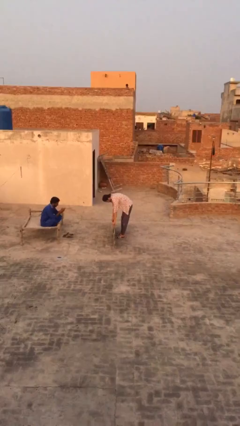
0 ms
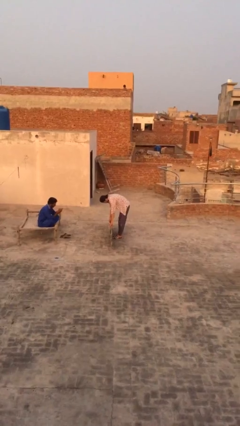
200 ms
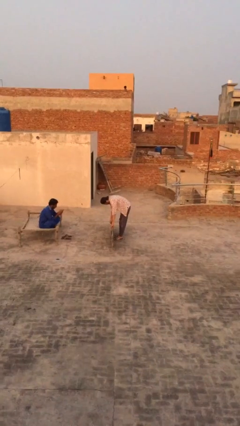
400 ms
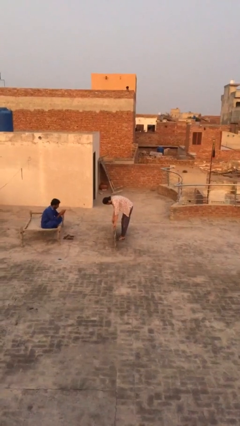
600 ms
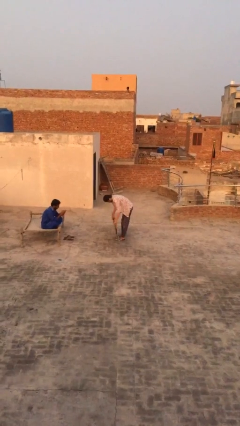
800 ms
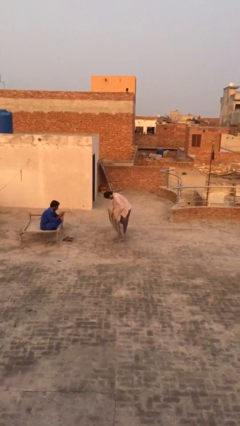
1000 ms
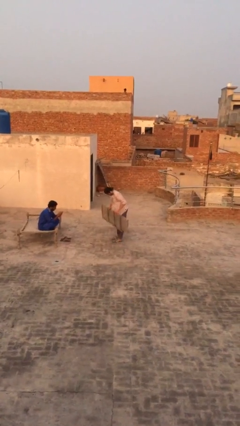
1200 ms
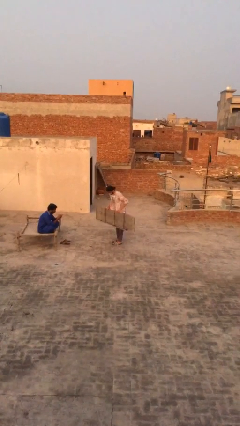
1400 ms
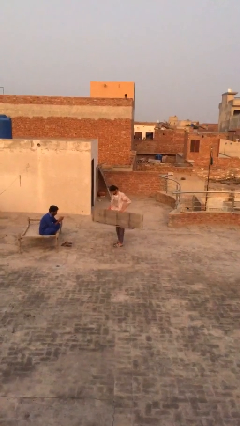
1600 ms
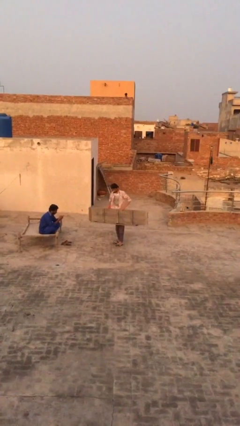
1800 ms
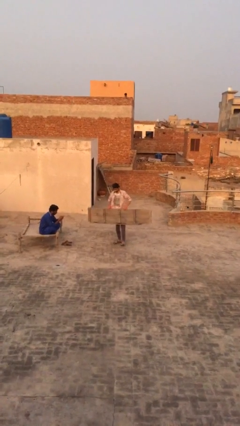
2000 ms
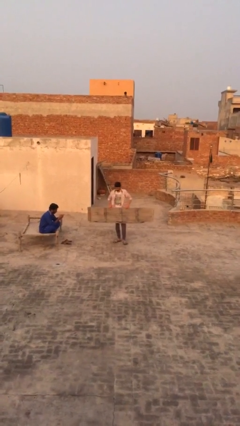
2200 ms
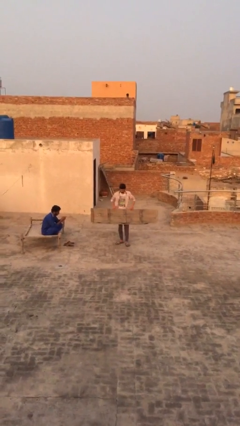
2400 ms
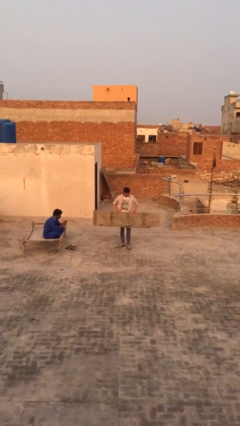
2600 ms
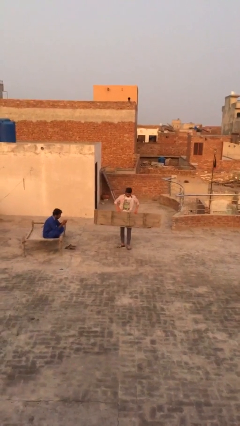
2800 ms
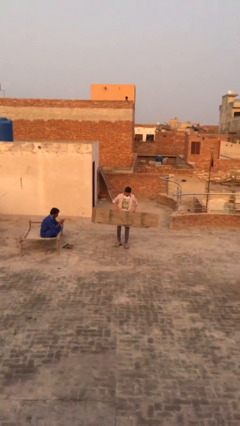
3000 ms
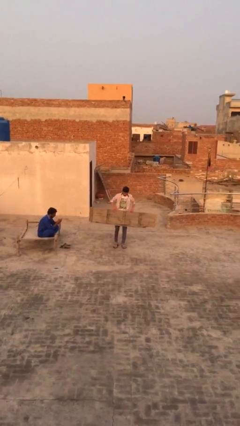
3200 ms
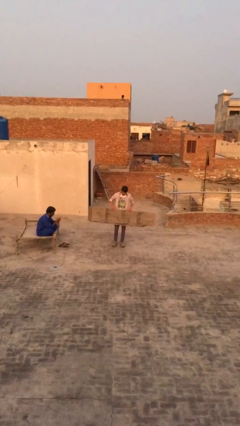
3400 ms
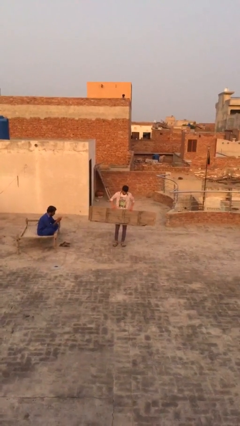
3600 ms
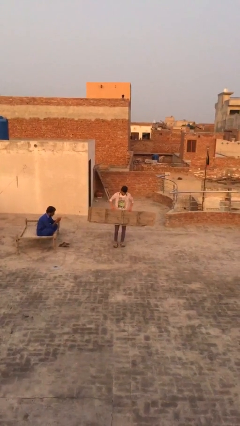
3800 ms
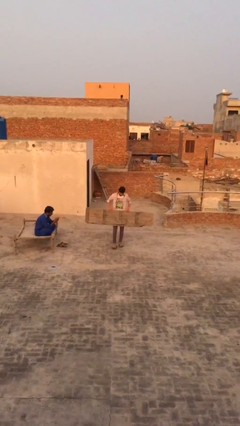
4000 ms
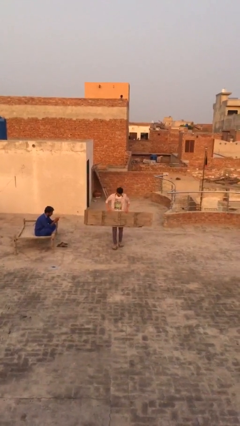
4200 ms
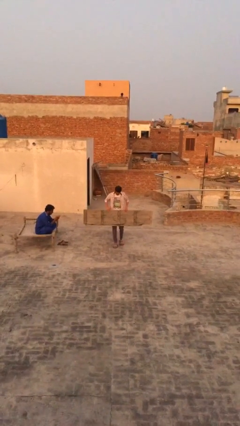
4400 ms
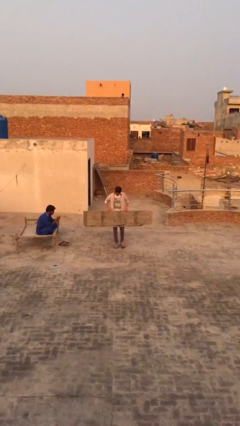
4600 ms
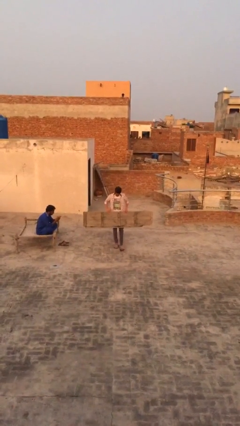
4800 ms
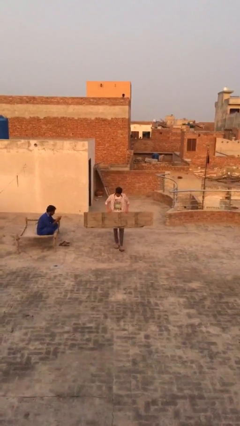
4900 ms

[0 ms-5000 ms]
person carries heavy object

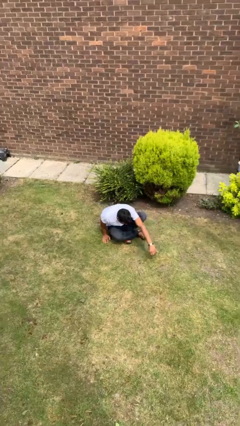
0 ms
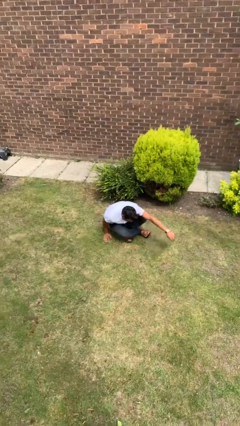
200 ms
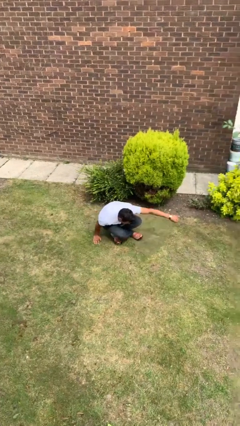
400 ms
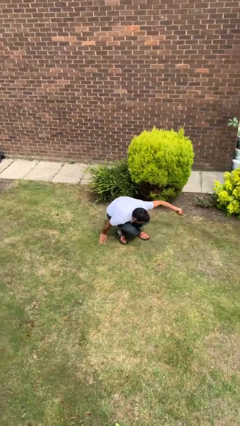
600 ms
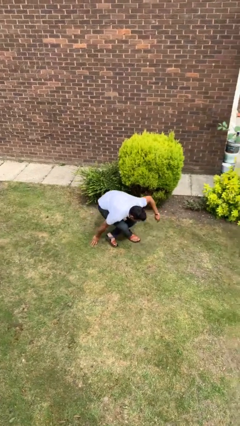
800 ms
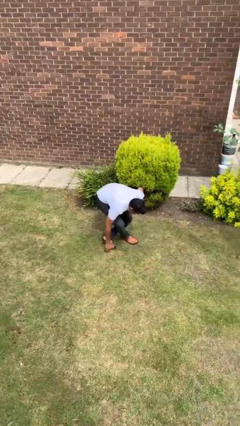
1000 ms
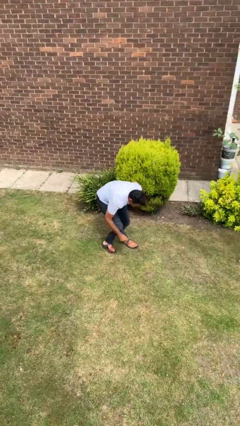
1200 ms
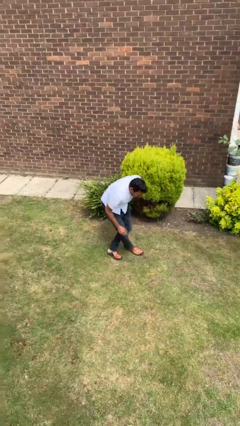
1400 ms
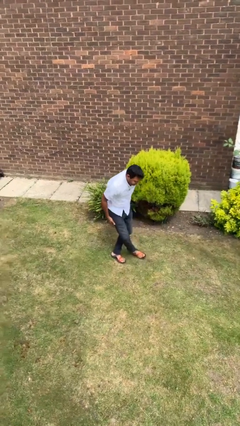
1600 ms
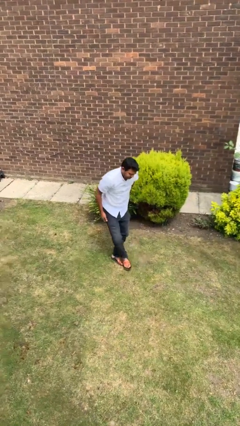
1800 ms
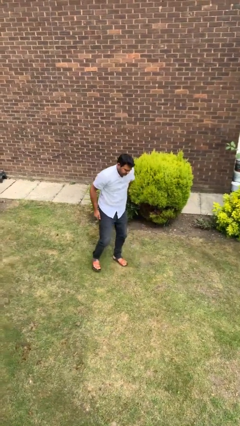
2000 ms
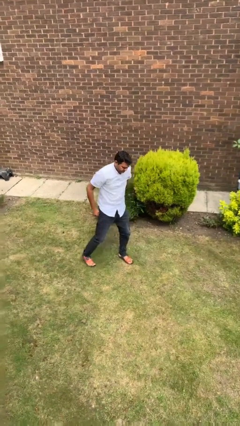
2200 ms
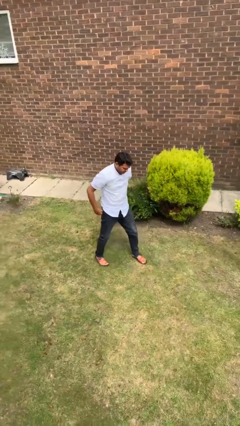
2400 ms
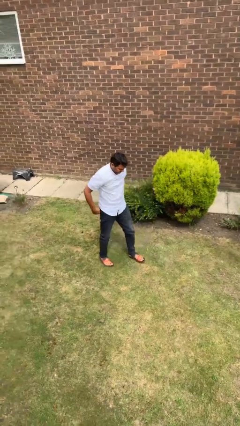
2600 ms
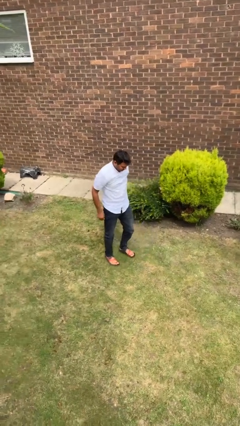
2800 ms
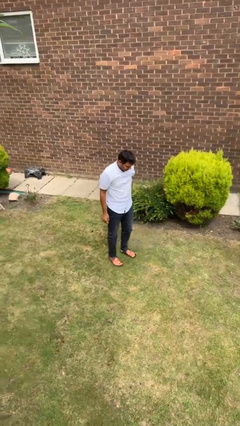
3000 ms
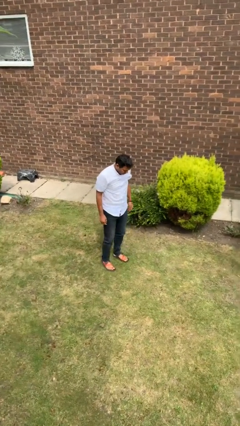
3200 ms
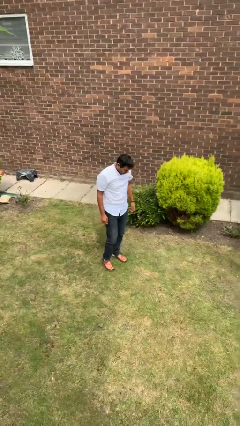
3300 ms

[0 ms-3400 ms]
person stands up from floor

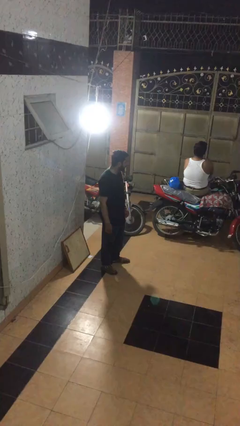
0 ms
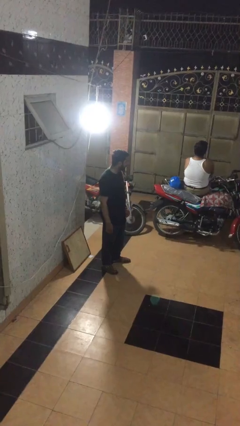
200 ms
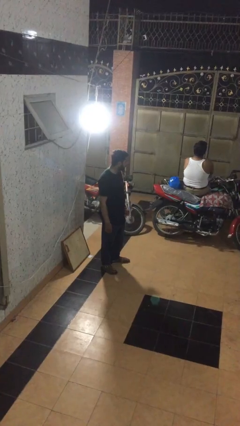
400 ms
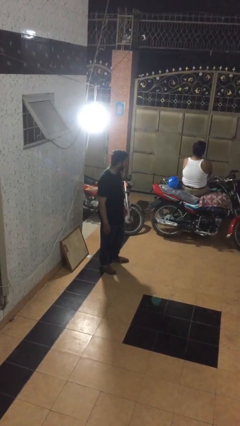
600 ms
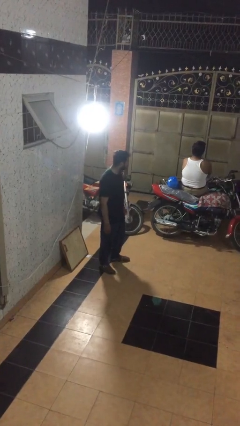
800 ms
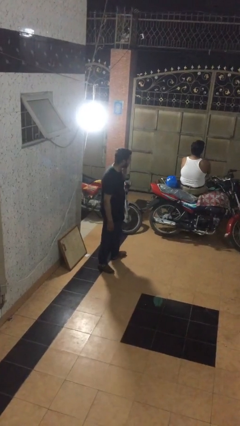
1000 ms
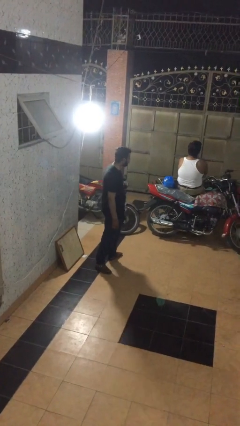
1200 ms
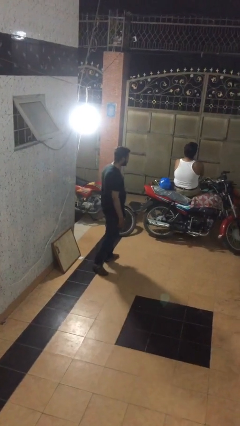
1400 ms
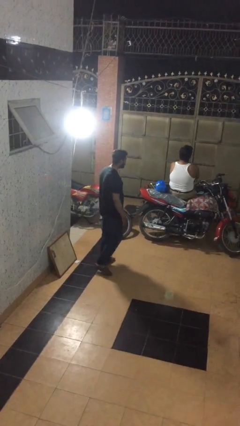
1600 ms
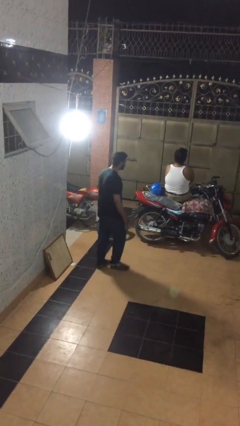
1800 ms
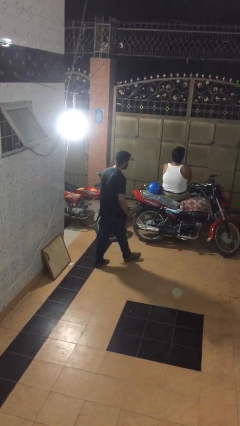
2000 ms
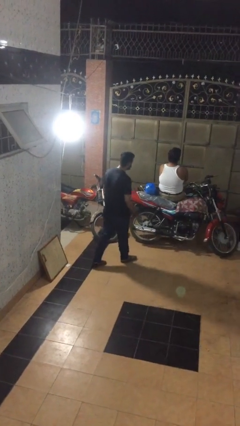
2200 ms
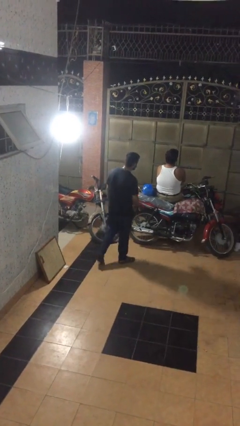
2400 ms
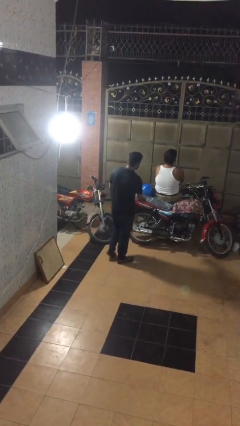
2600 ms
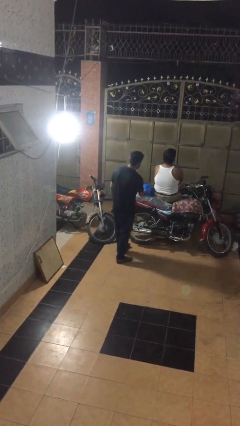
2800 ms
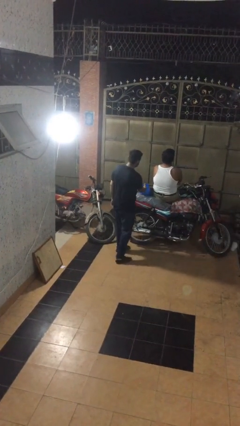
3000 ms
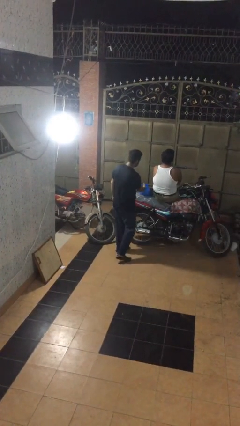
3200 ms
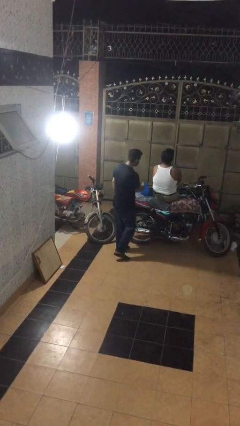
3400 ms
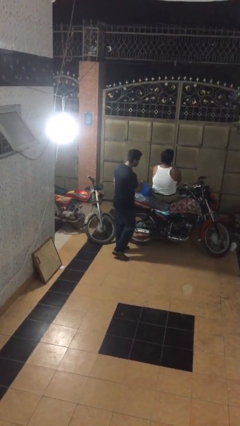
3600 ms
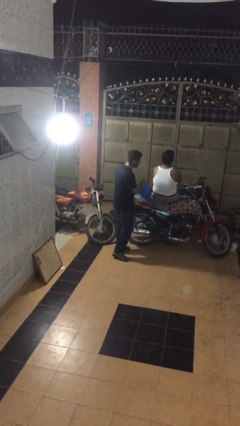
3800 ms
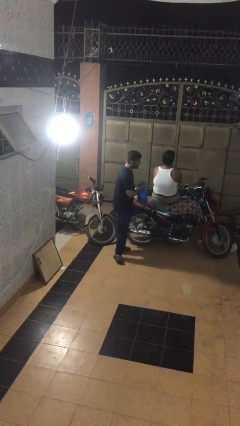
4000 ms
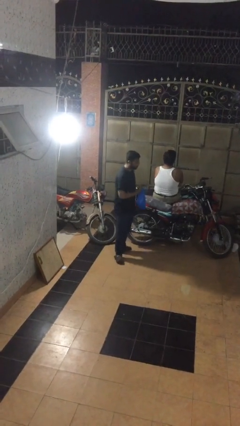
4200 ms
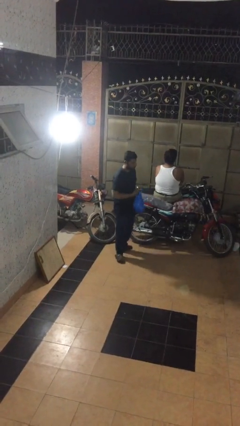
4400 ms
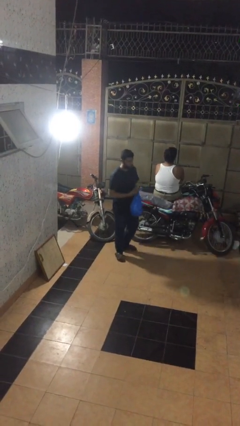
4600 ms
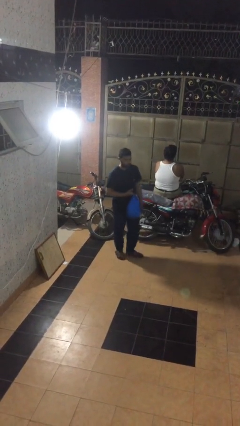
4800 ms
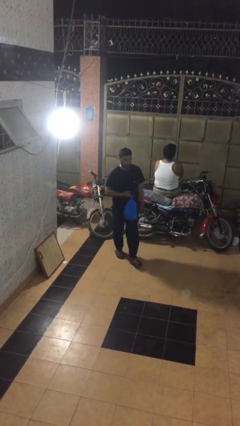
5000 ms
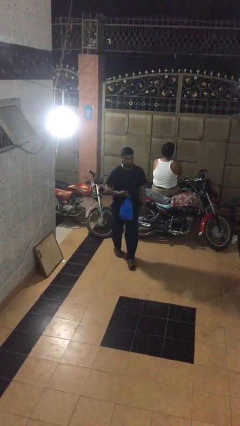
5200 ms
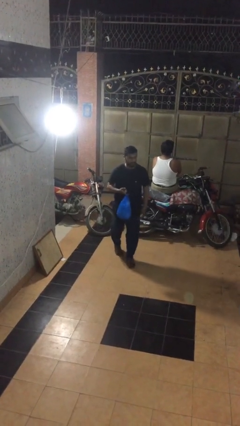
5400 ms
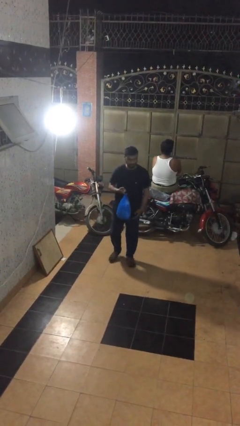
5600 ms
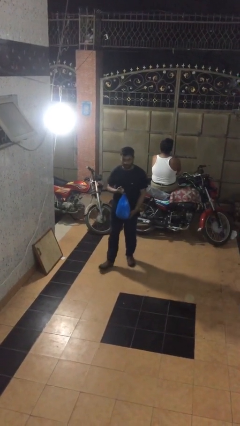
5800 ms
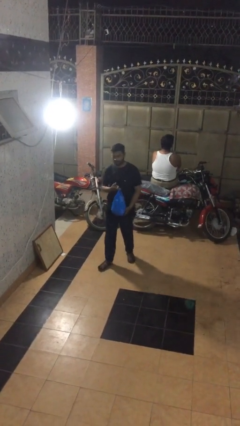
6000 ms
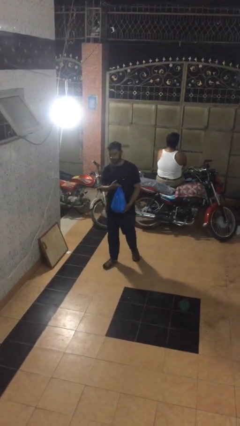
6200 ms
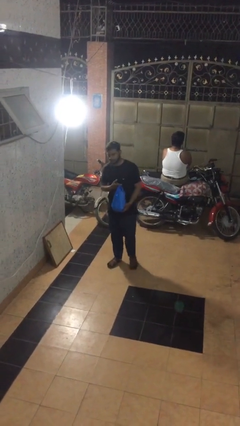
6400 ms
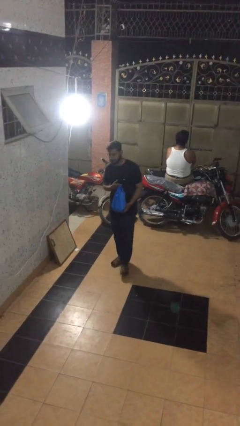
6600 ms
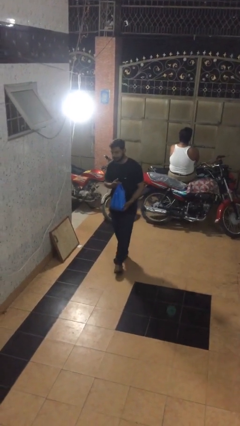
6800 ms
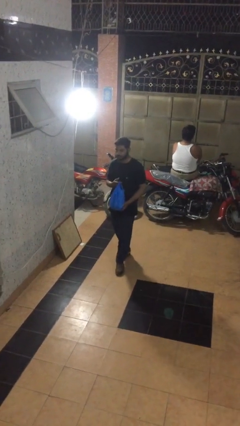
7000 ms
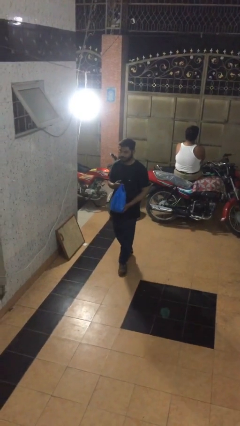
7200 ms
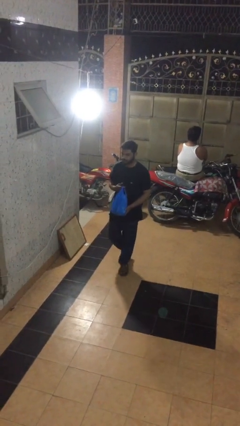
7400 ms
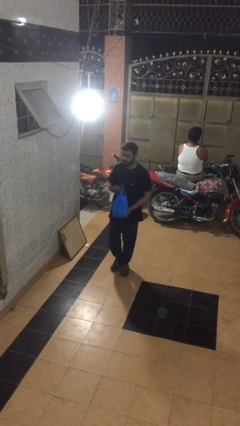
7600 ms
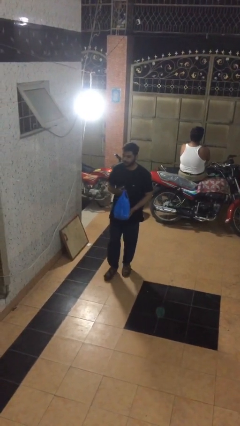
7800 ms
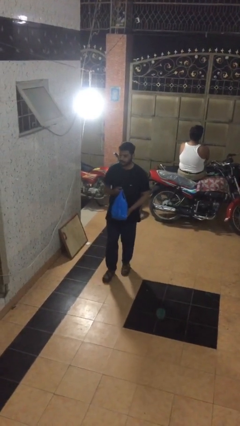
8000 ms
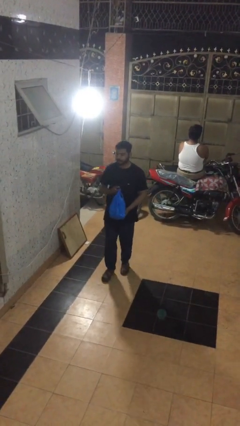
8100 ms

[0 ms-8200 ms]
person steals object from person

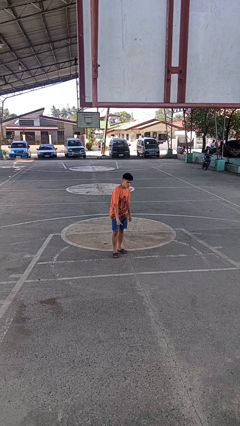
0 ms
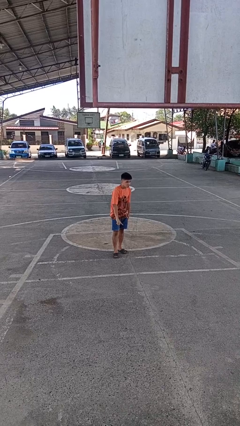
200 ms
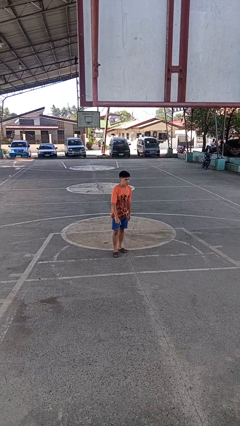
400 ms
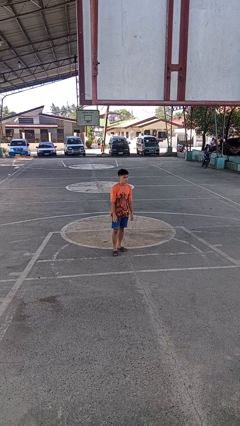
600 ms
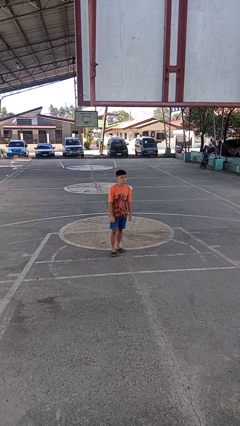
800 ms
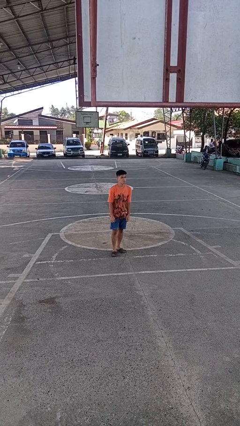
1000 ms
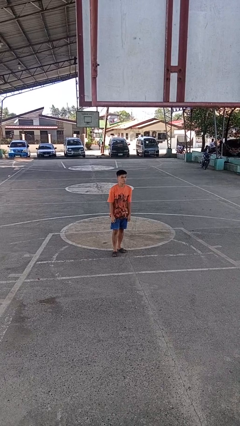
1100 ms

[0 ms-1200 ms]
person gestures swipe down
